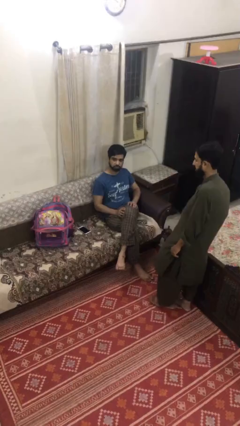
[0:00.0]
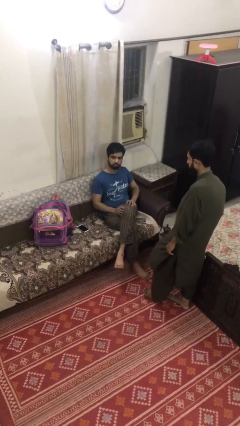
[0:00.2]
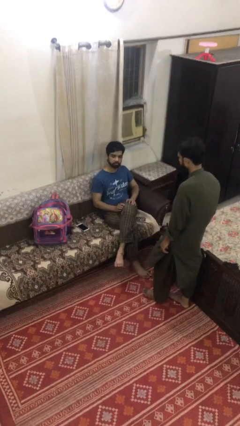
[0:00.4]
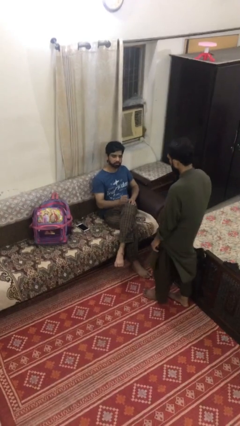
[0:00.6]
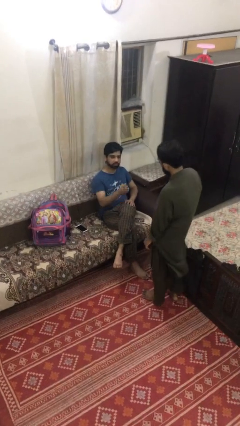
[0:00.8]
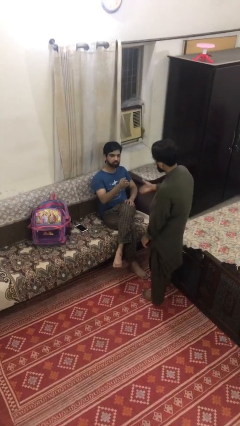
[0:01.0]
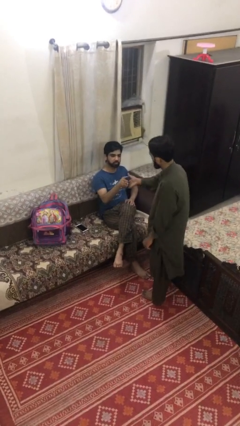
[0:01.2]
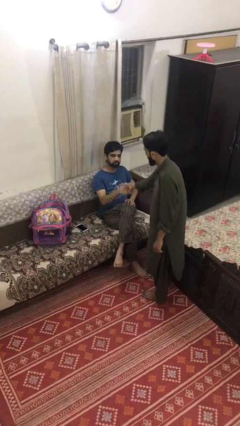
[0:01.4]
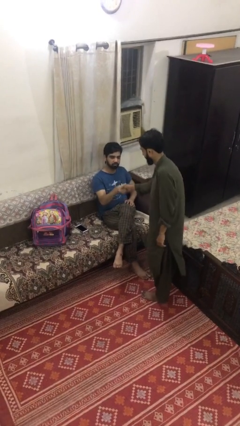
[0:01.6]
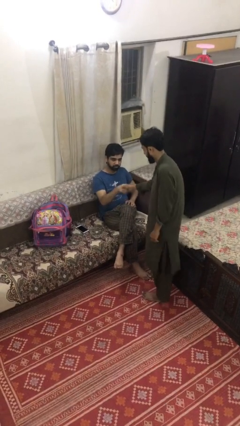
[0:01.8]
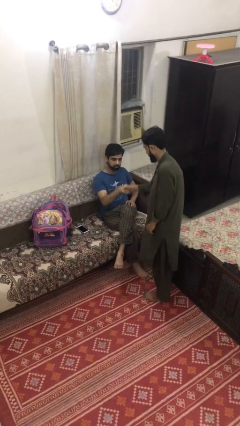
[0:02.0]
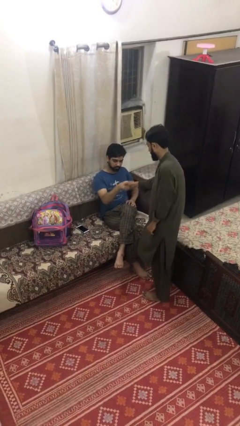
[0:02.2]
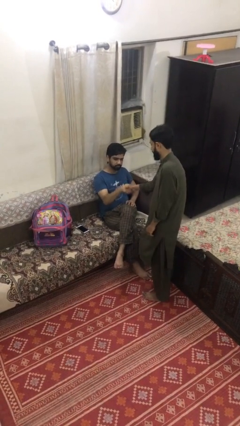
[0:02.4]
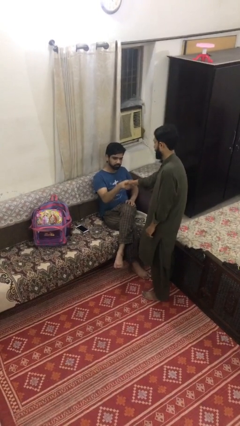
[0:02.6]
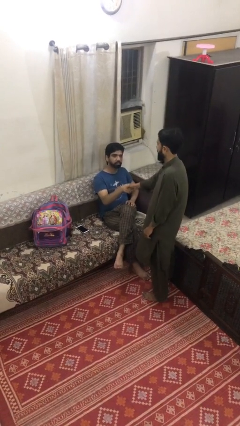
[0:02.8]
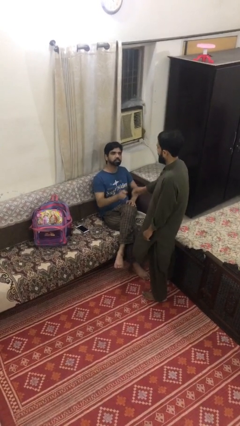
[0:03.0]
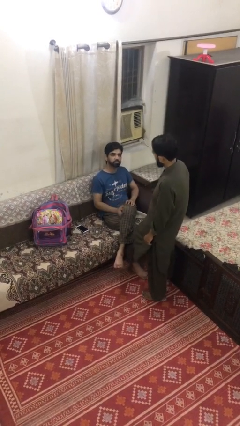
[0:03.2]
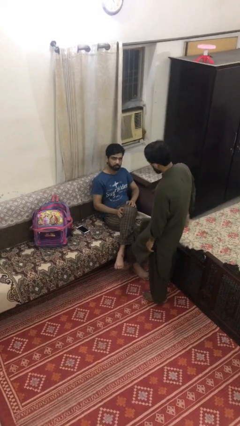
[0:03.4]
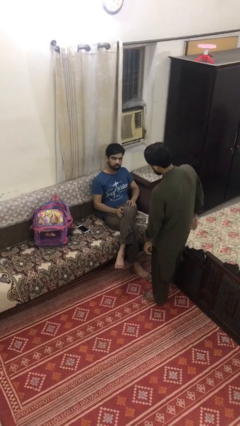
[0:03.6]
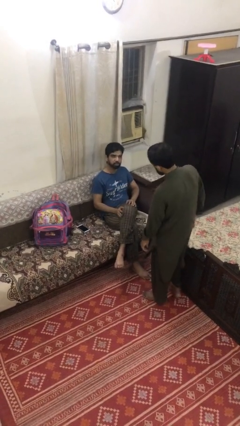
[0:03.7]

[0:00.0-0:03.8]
person shakes hand

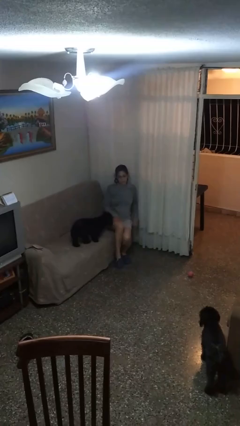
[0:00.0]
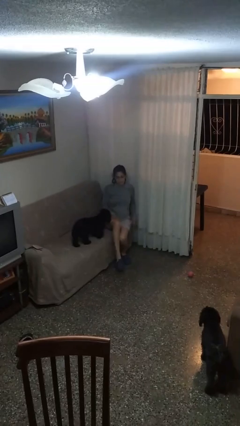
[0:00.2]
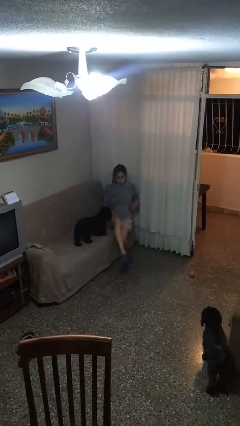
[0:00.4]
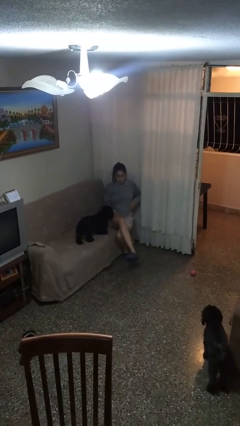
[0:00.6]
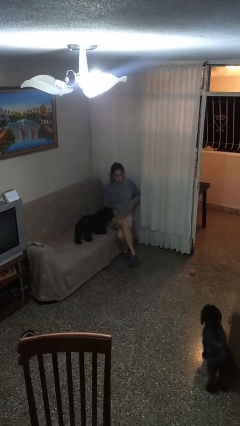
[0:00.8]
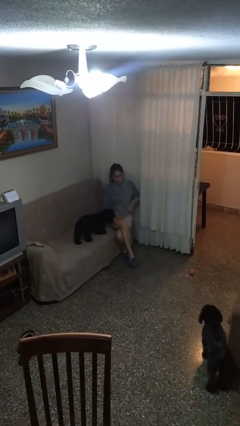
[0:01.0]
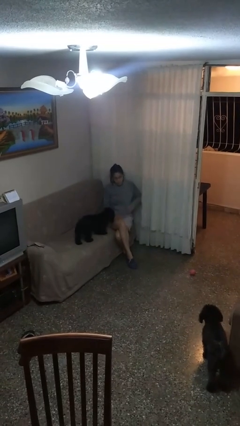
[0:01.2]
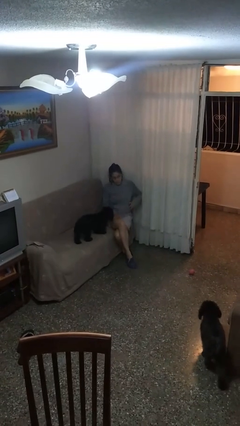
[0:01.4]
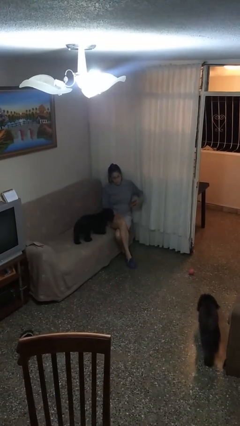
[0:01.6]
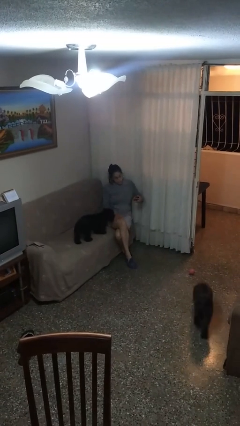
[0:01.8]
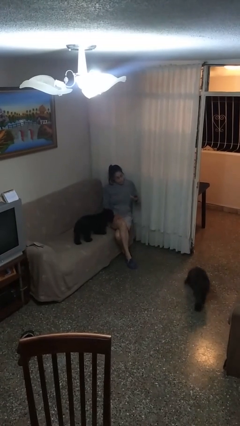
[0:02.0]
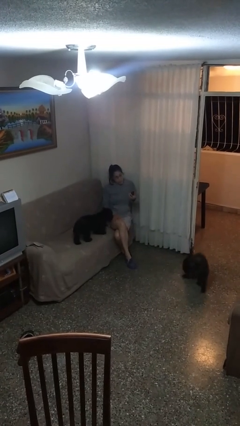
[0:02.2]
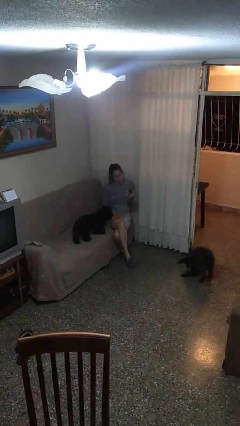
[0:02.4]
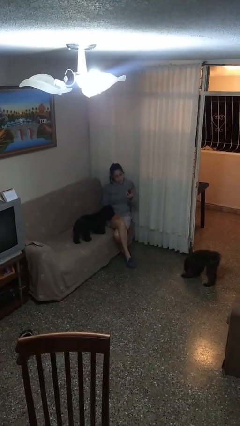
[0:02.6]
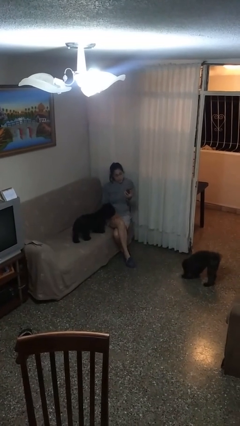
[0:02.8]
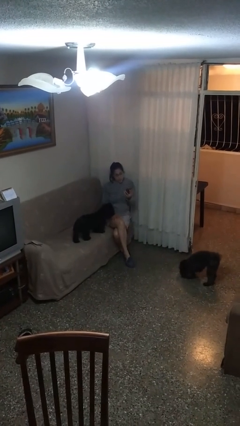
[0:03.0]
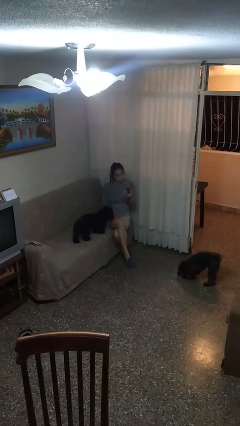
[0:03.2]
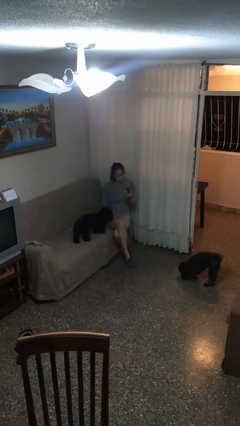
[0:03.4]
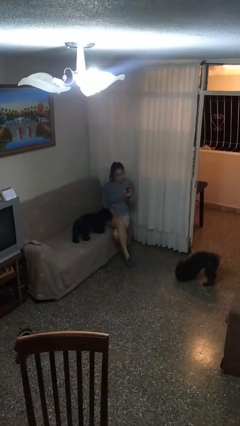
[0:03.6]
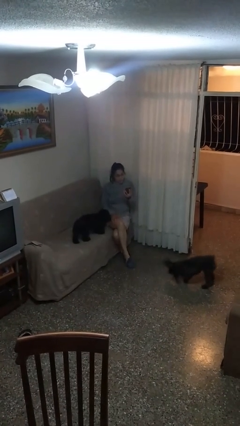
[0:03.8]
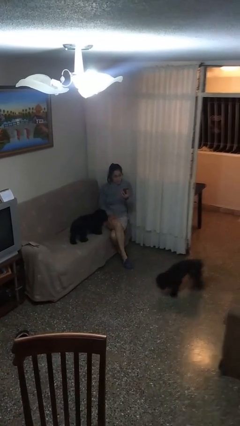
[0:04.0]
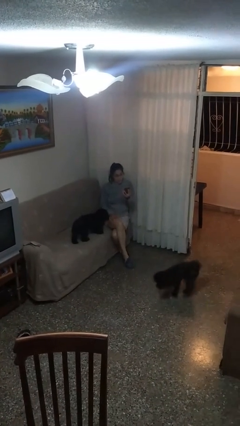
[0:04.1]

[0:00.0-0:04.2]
person takes phone from pocket

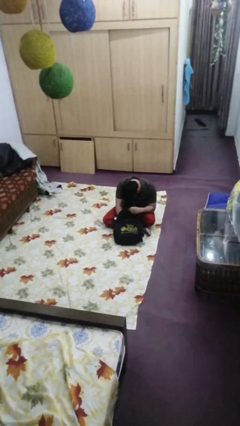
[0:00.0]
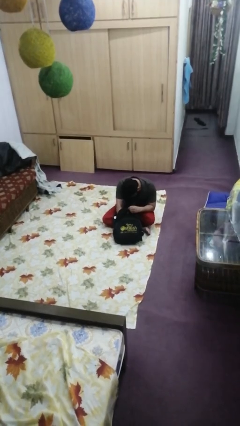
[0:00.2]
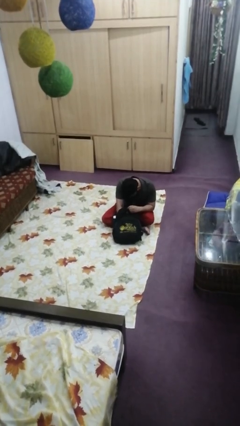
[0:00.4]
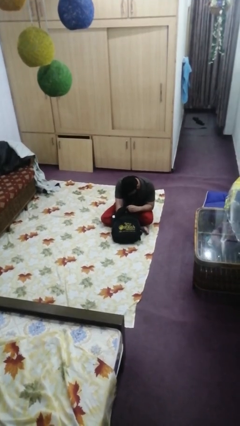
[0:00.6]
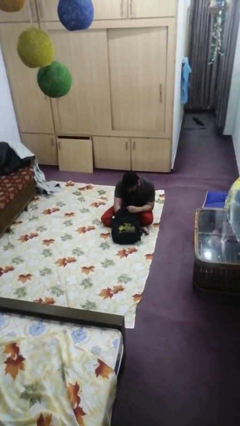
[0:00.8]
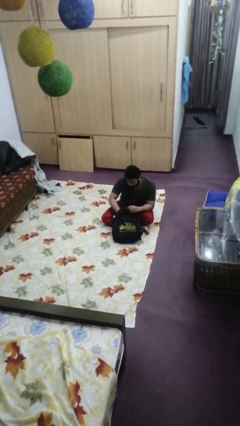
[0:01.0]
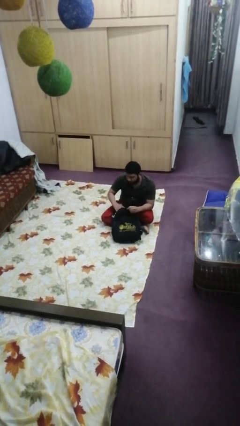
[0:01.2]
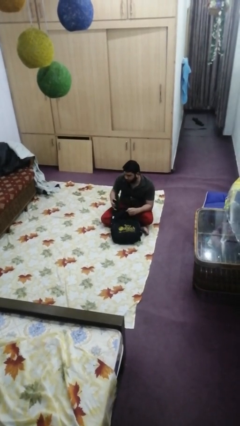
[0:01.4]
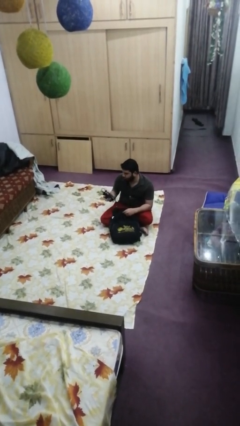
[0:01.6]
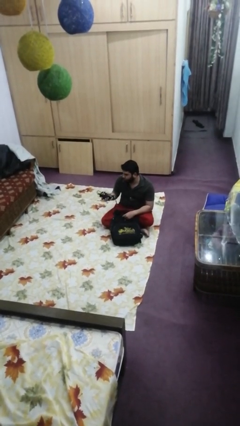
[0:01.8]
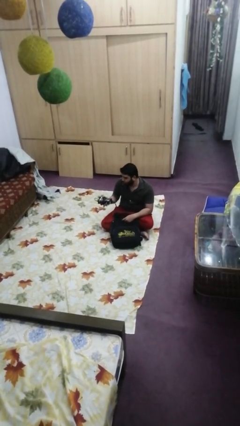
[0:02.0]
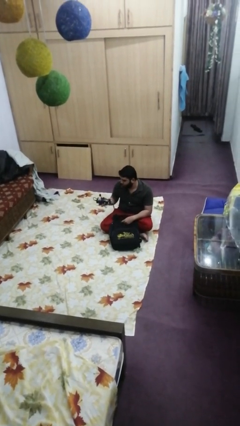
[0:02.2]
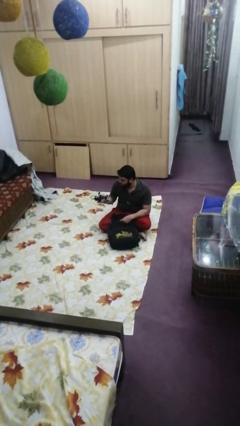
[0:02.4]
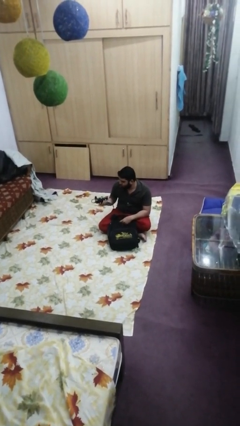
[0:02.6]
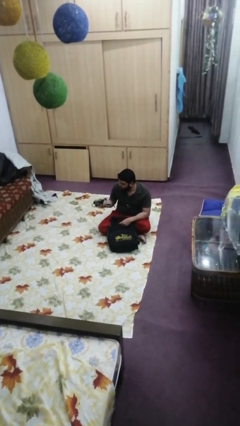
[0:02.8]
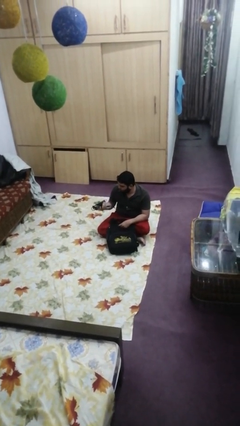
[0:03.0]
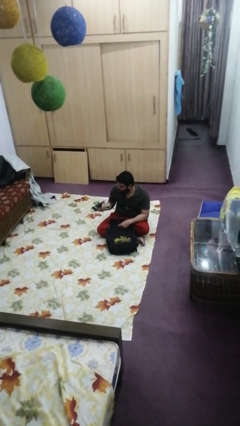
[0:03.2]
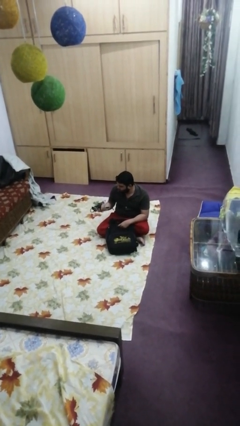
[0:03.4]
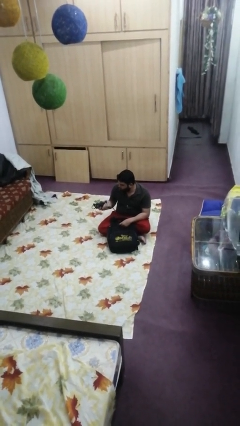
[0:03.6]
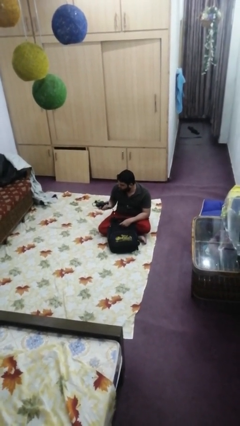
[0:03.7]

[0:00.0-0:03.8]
person takes object from backpack

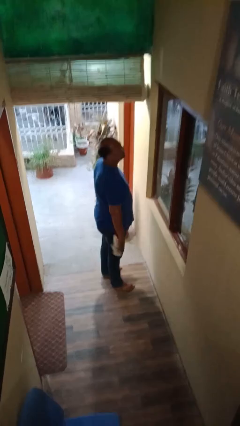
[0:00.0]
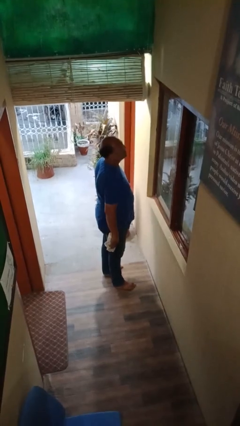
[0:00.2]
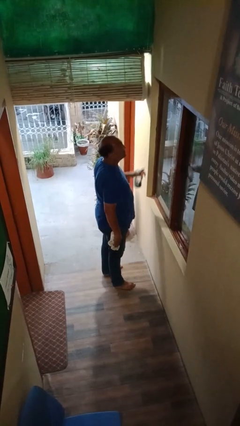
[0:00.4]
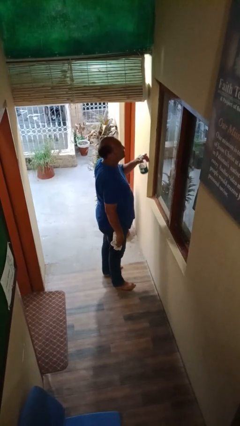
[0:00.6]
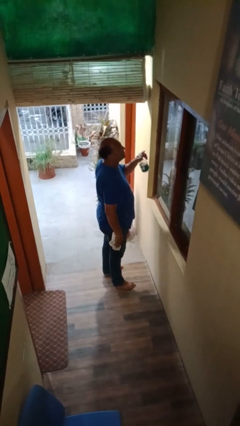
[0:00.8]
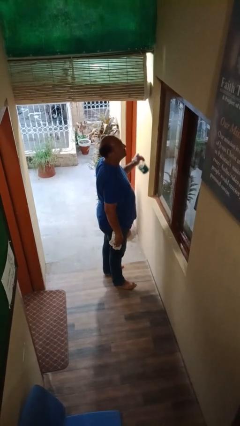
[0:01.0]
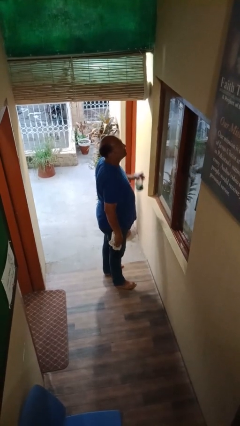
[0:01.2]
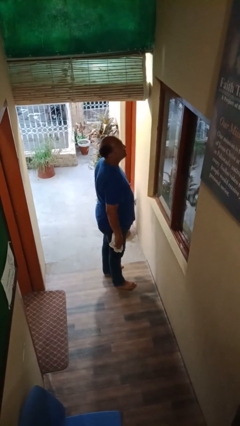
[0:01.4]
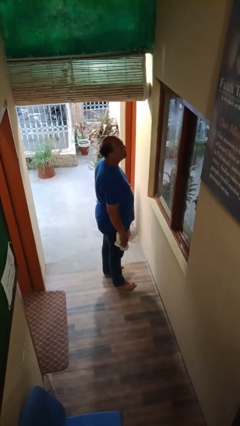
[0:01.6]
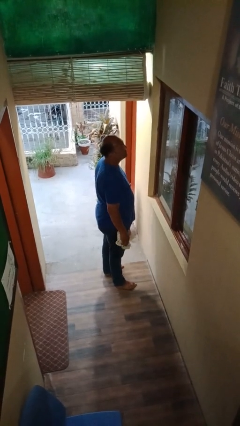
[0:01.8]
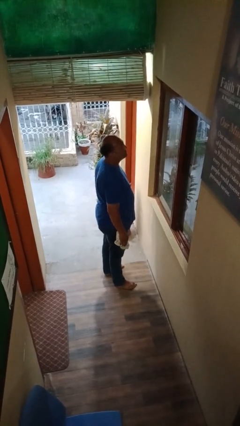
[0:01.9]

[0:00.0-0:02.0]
person sprays from bottle

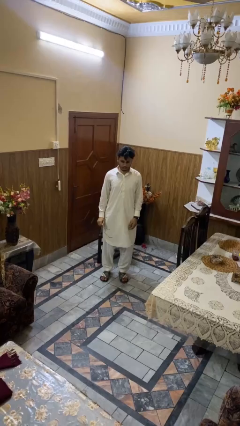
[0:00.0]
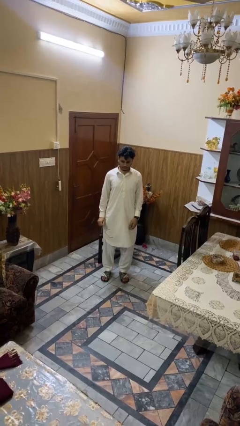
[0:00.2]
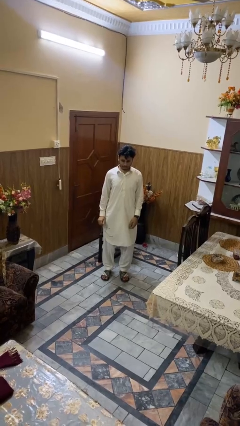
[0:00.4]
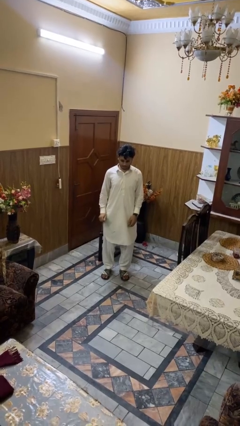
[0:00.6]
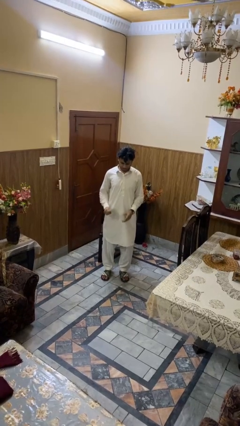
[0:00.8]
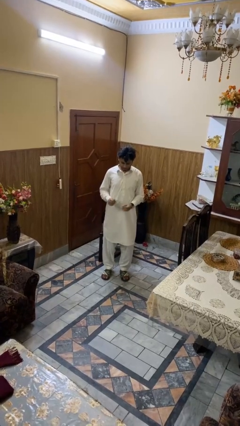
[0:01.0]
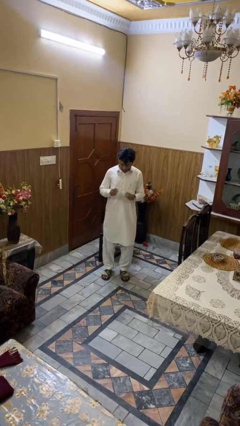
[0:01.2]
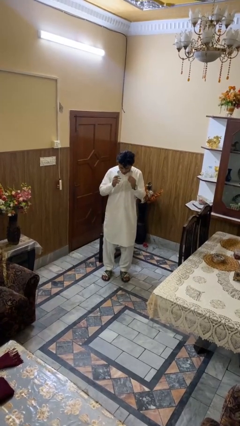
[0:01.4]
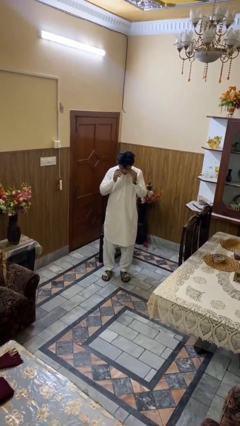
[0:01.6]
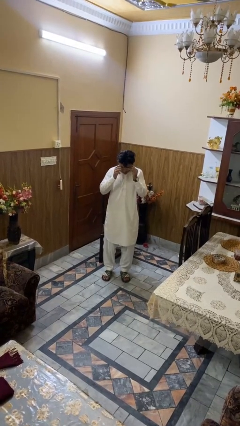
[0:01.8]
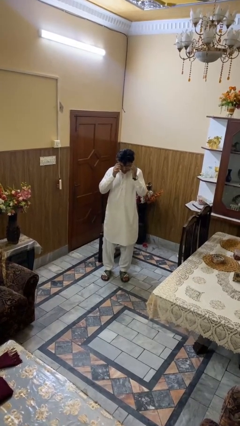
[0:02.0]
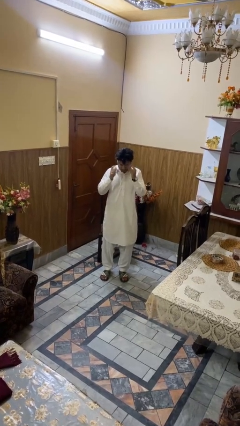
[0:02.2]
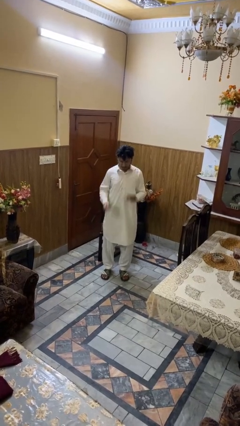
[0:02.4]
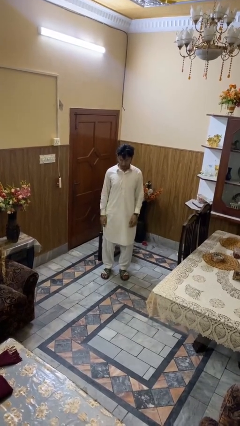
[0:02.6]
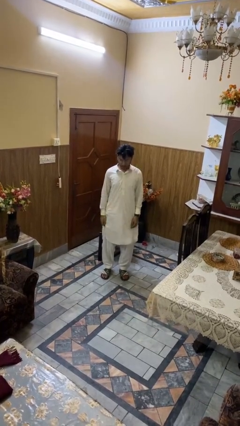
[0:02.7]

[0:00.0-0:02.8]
person puts on glasses

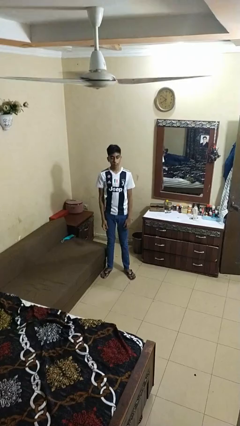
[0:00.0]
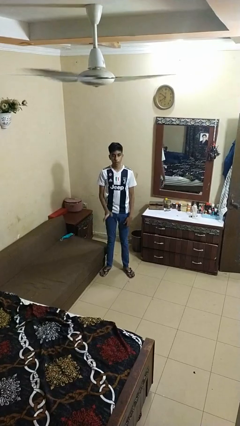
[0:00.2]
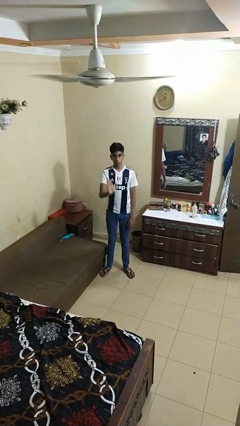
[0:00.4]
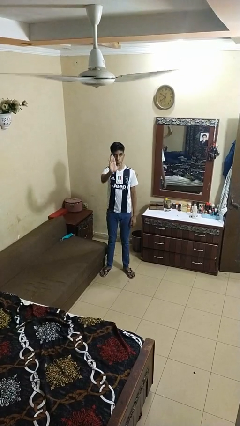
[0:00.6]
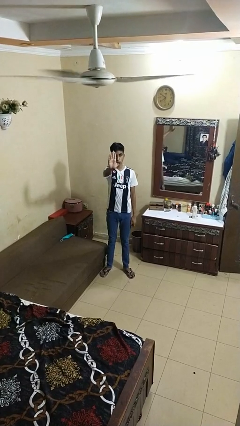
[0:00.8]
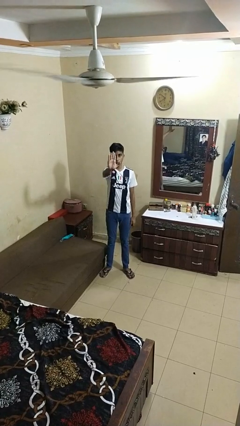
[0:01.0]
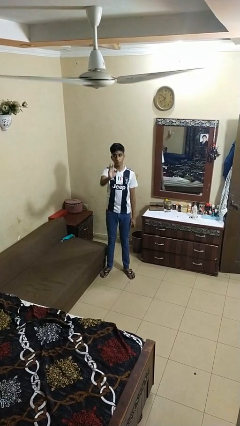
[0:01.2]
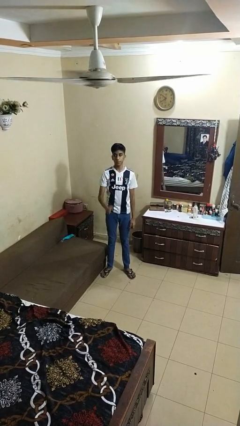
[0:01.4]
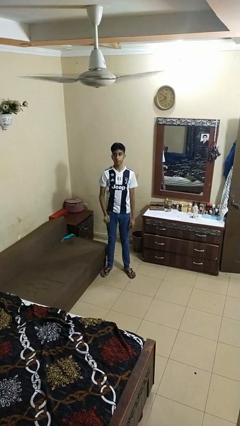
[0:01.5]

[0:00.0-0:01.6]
person gestures stop
